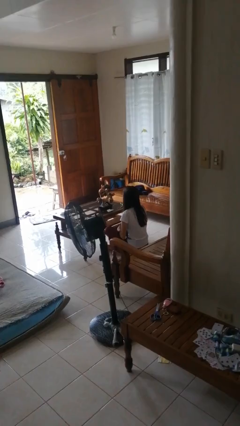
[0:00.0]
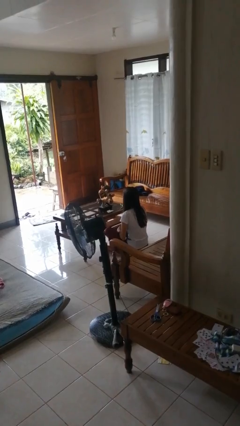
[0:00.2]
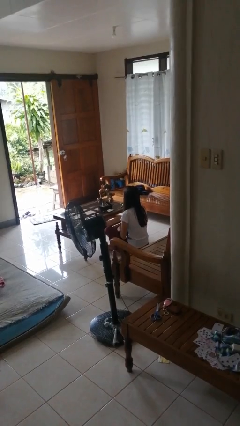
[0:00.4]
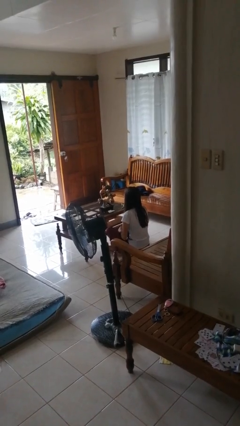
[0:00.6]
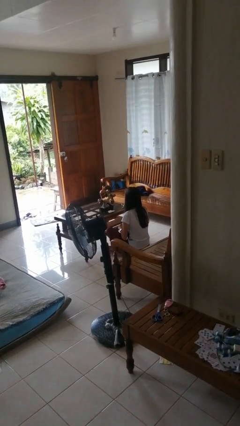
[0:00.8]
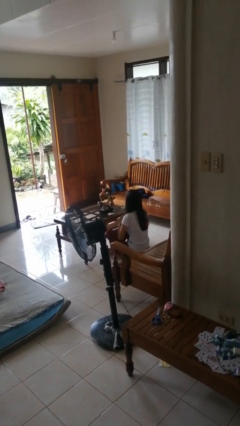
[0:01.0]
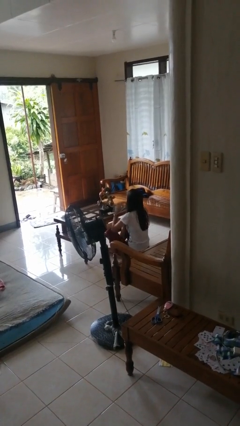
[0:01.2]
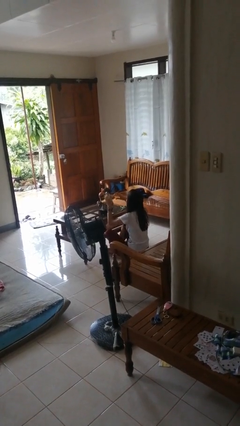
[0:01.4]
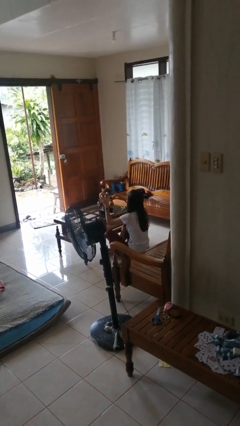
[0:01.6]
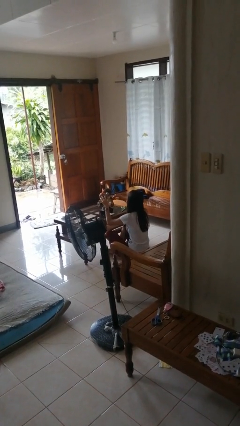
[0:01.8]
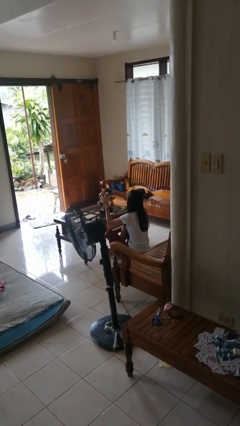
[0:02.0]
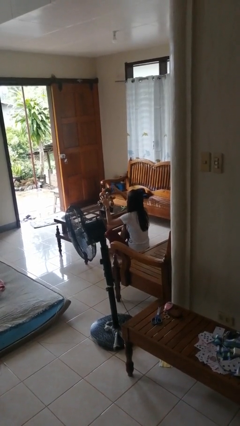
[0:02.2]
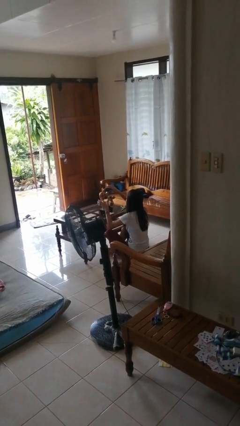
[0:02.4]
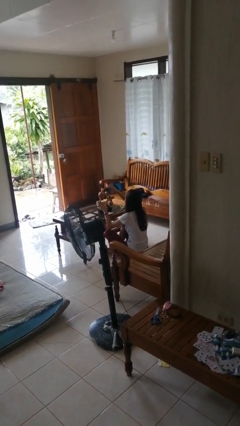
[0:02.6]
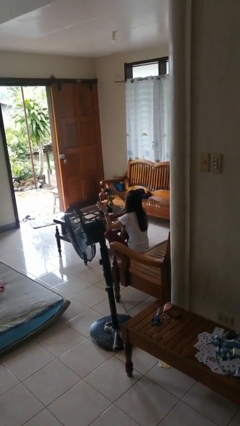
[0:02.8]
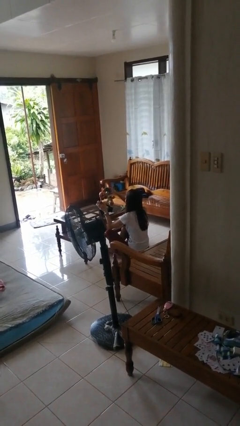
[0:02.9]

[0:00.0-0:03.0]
person arranges flowers in vase

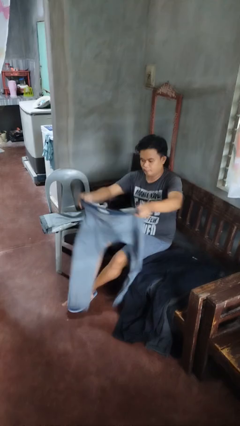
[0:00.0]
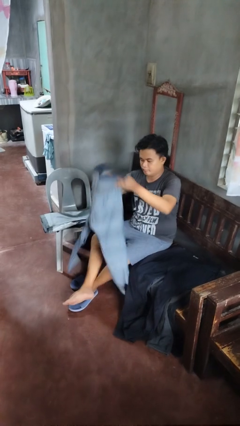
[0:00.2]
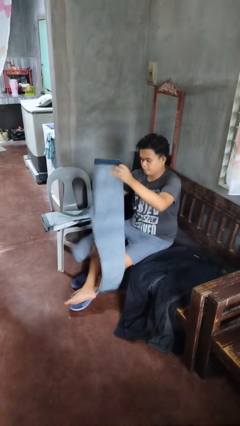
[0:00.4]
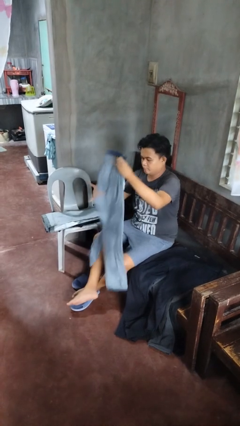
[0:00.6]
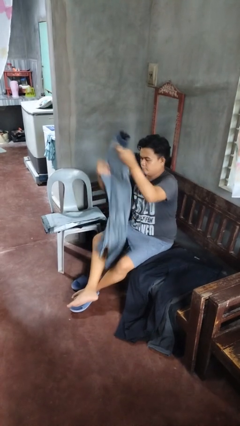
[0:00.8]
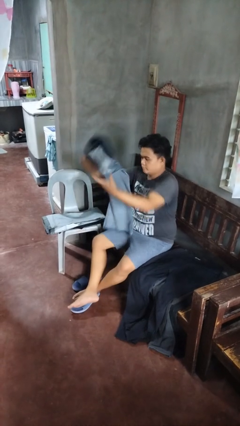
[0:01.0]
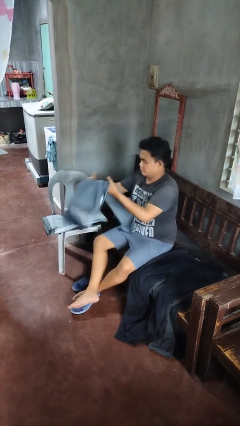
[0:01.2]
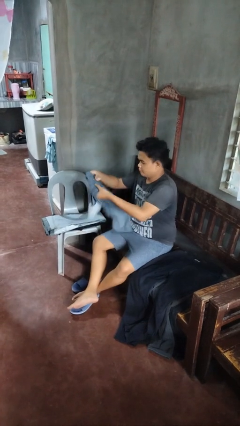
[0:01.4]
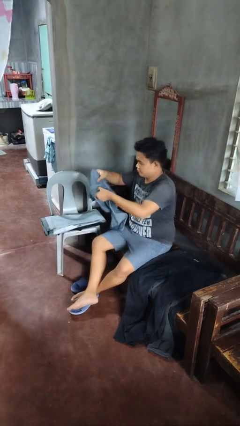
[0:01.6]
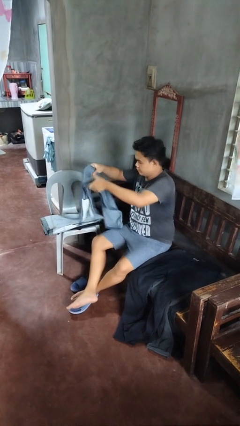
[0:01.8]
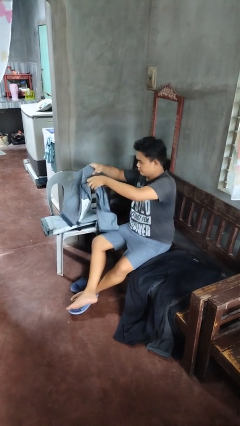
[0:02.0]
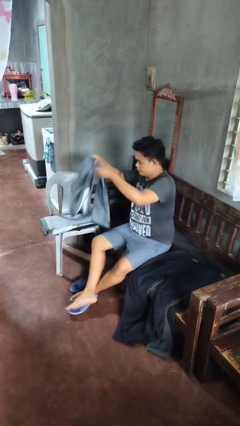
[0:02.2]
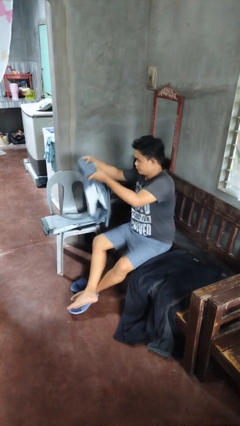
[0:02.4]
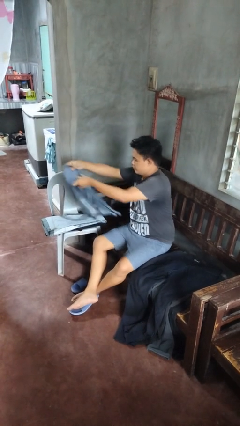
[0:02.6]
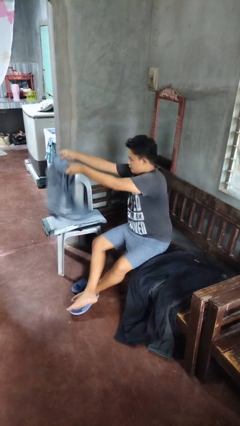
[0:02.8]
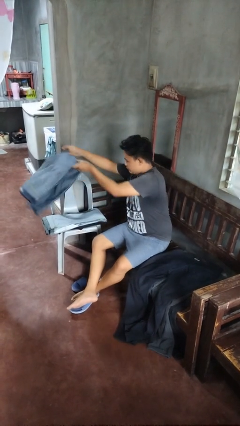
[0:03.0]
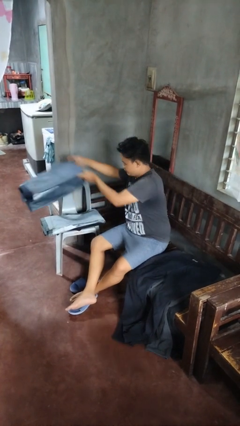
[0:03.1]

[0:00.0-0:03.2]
person folds pants

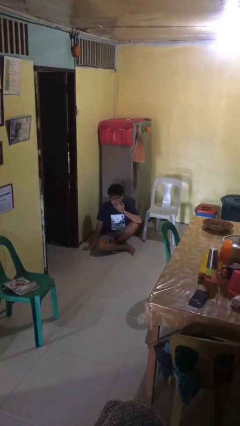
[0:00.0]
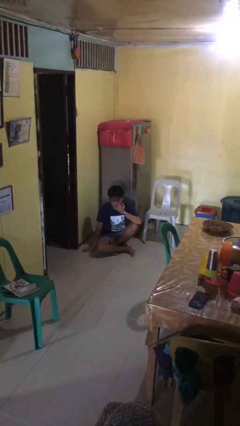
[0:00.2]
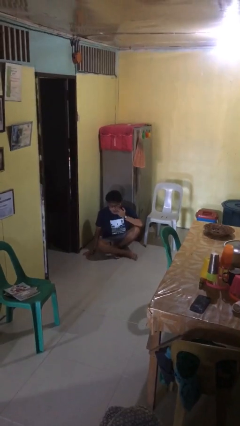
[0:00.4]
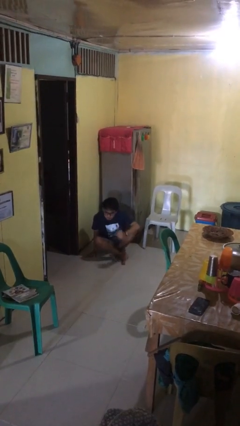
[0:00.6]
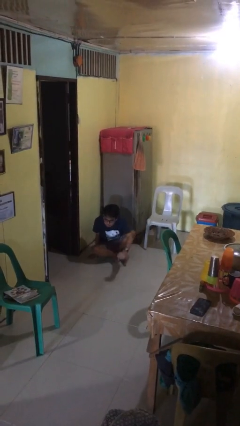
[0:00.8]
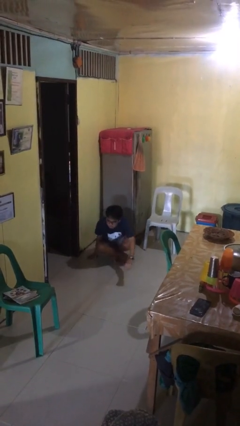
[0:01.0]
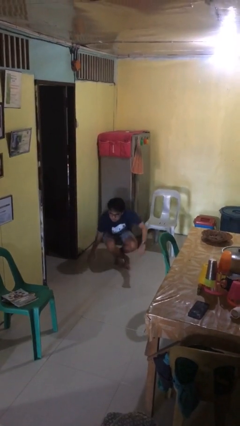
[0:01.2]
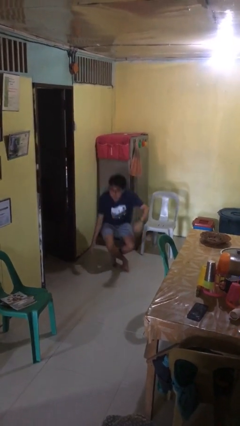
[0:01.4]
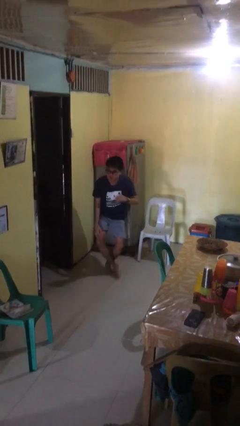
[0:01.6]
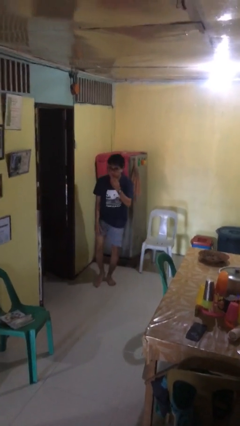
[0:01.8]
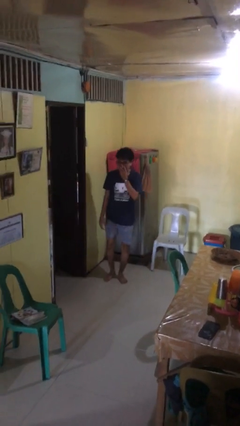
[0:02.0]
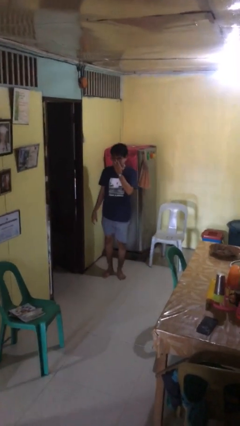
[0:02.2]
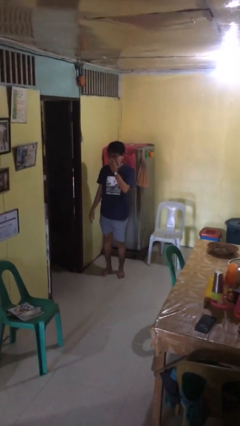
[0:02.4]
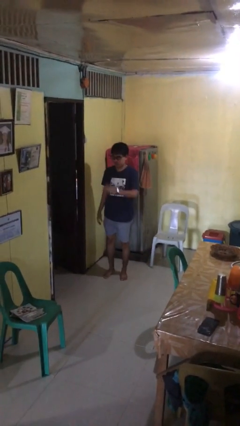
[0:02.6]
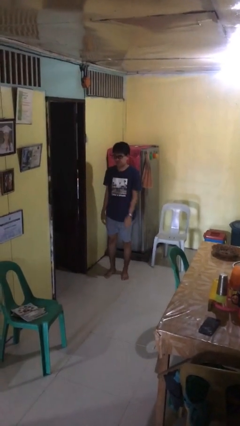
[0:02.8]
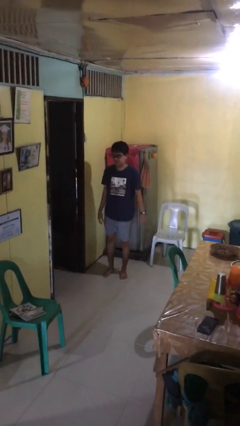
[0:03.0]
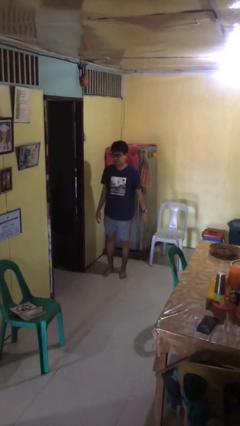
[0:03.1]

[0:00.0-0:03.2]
person stands up from floor

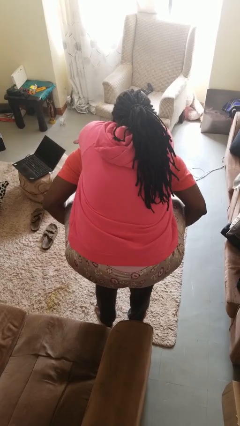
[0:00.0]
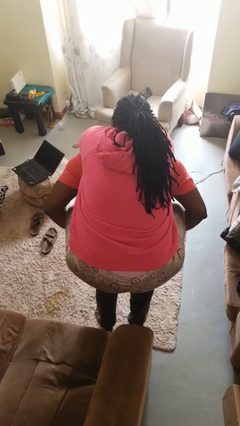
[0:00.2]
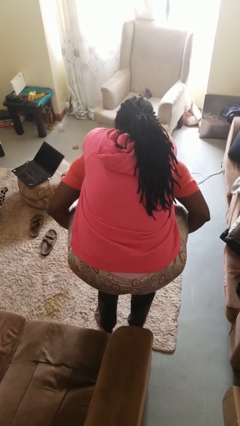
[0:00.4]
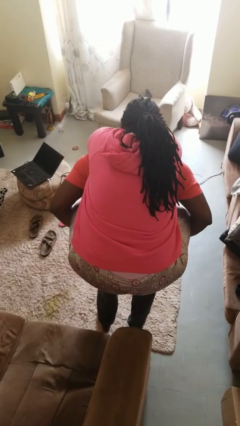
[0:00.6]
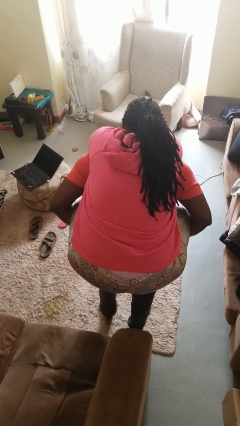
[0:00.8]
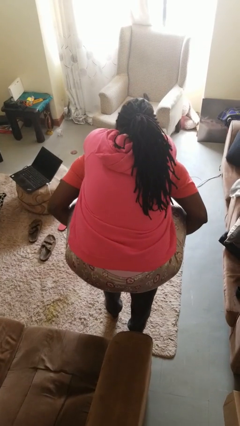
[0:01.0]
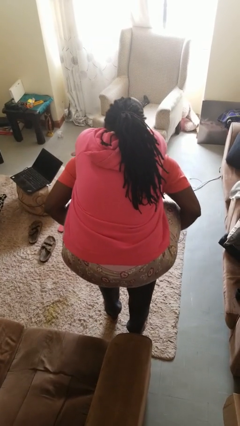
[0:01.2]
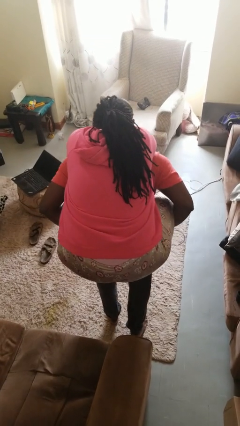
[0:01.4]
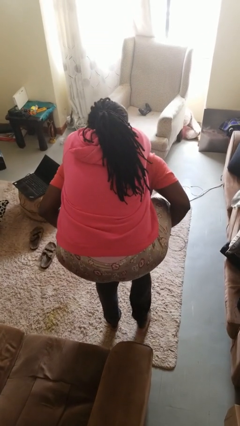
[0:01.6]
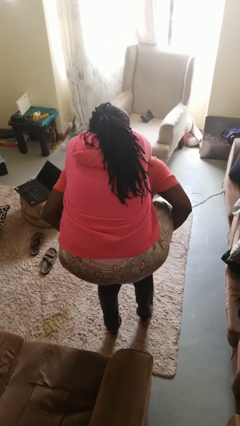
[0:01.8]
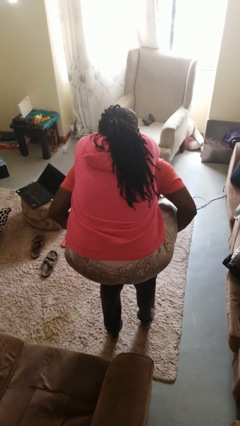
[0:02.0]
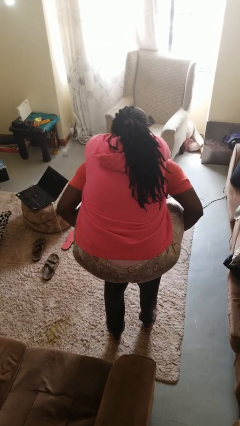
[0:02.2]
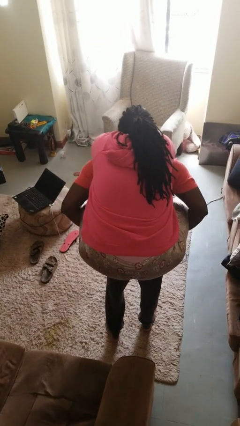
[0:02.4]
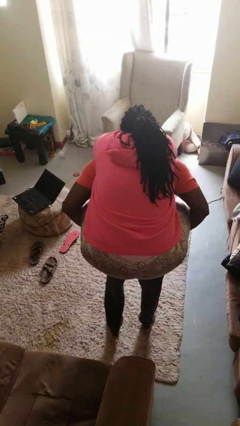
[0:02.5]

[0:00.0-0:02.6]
person carries person on back

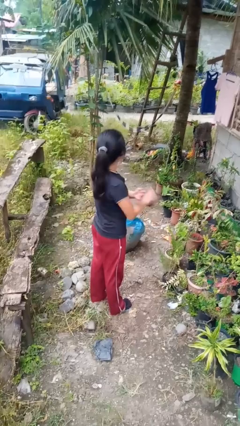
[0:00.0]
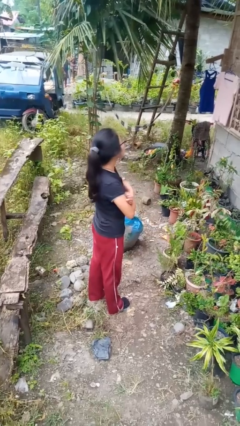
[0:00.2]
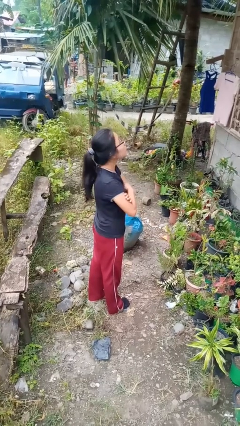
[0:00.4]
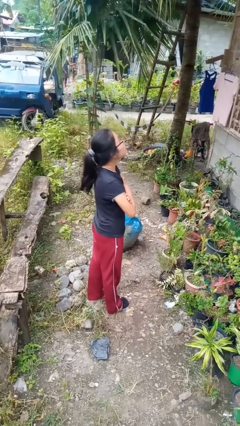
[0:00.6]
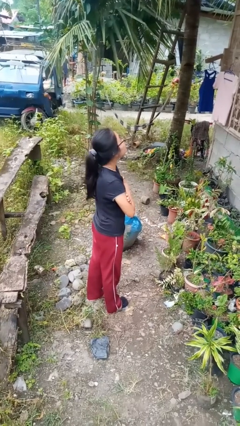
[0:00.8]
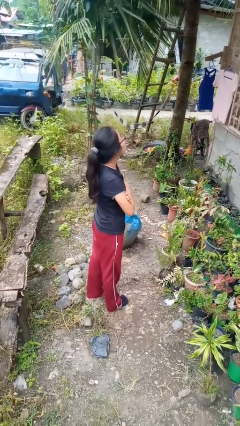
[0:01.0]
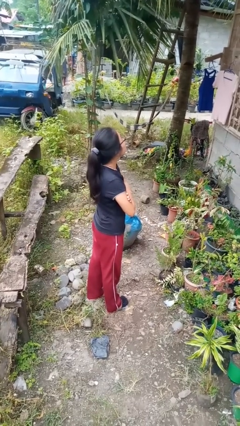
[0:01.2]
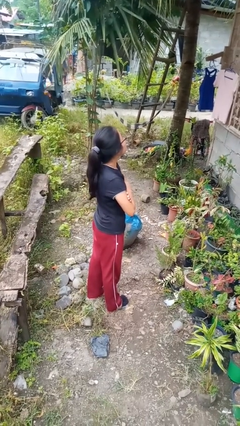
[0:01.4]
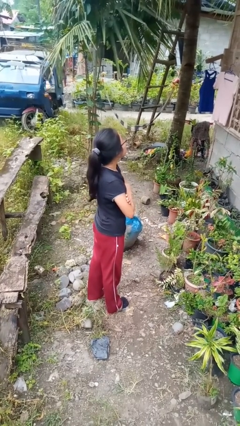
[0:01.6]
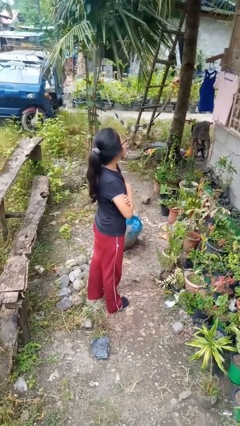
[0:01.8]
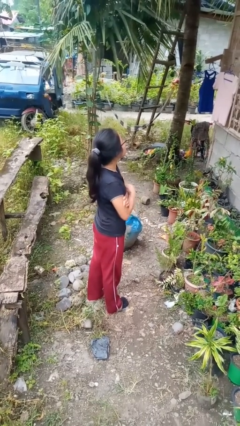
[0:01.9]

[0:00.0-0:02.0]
person crosses arms

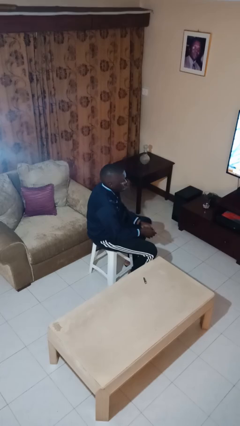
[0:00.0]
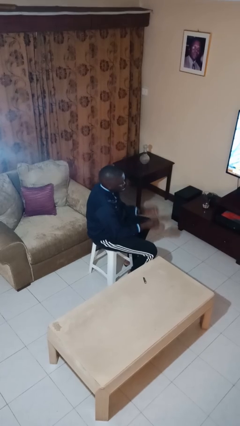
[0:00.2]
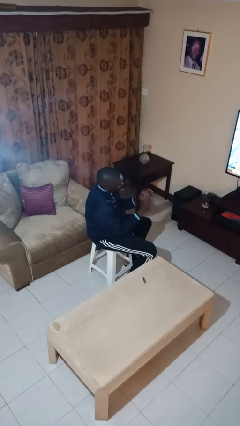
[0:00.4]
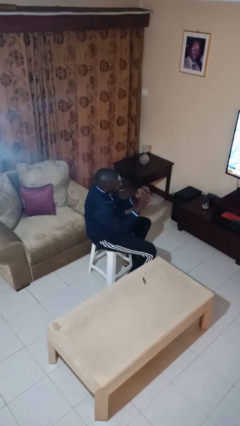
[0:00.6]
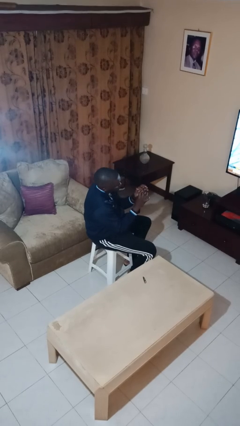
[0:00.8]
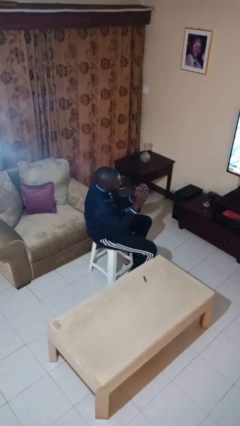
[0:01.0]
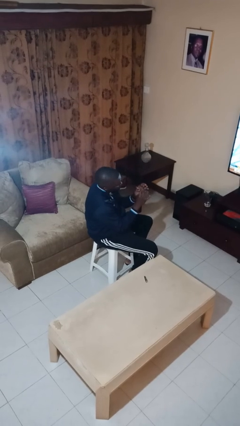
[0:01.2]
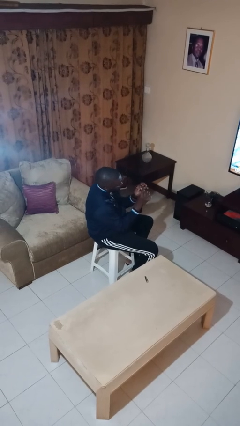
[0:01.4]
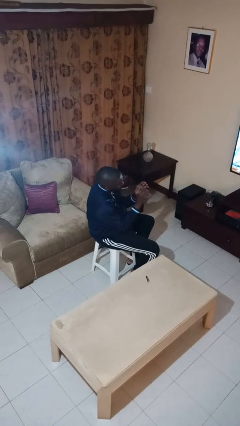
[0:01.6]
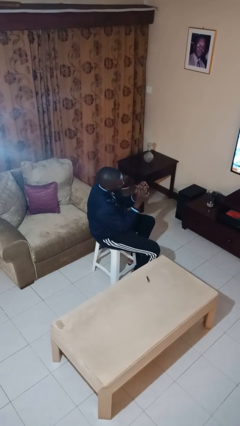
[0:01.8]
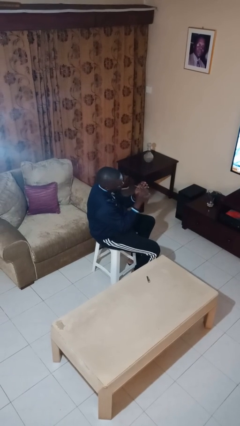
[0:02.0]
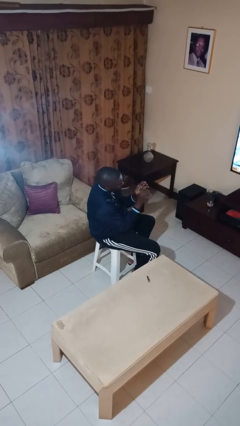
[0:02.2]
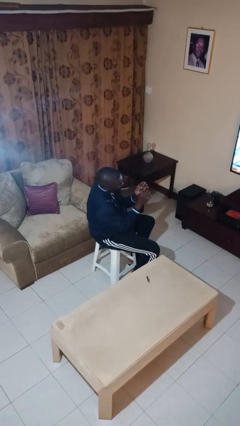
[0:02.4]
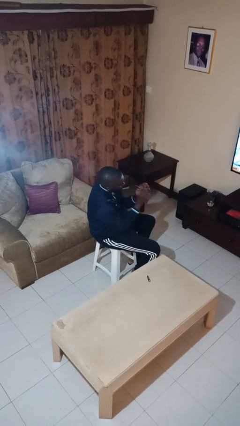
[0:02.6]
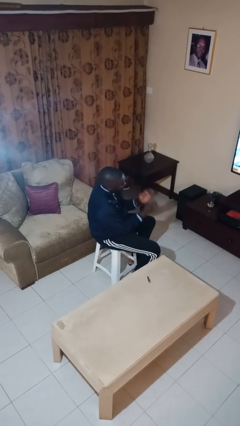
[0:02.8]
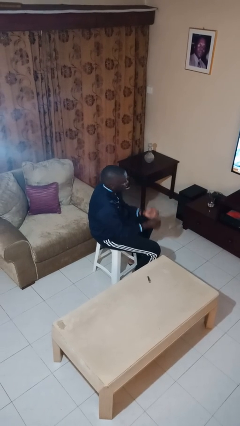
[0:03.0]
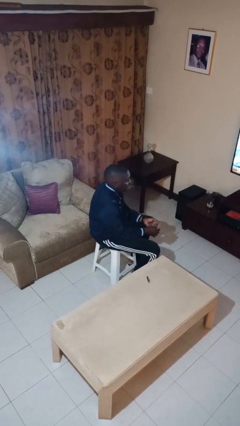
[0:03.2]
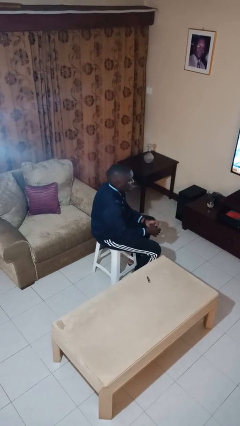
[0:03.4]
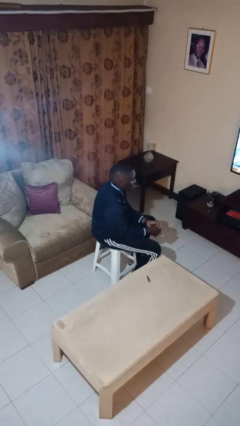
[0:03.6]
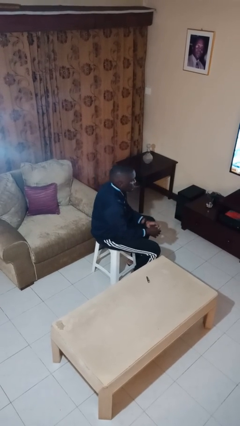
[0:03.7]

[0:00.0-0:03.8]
person files fingernails
